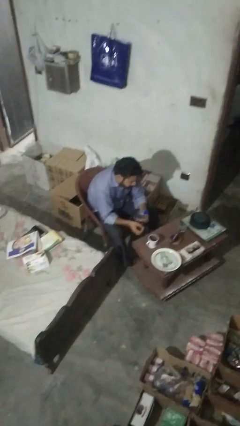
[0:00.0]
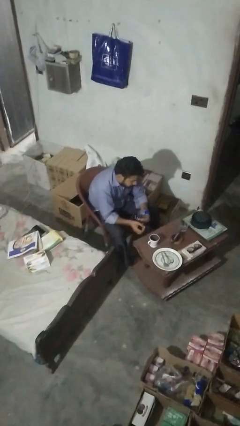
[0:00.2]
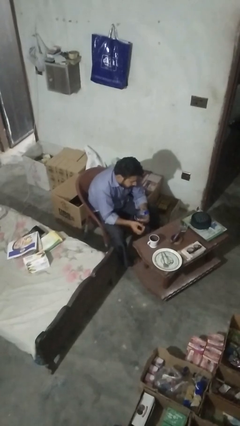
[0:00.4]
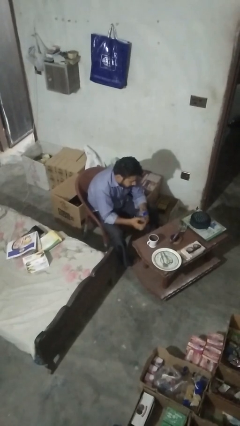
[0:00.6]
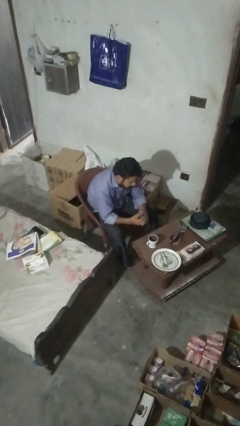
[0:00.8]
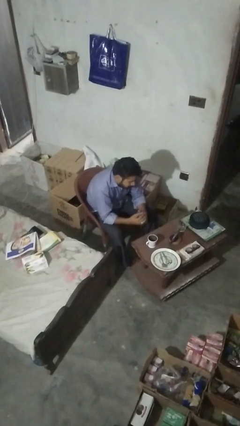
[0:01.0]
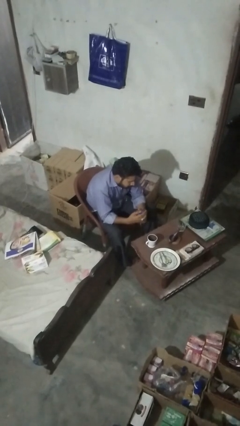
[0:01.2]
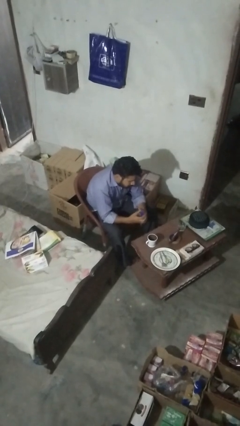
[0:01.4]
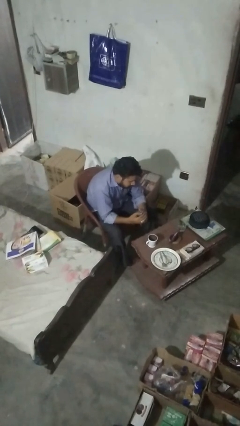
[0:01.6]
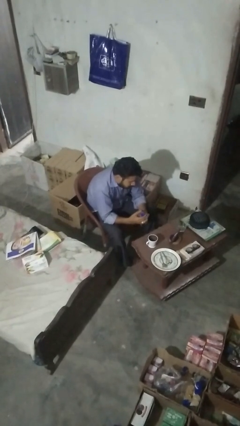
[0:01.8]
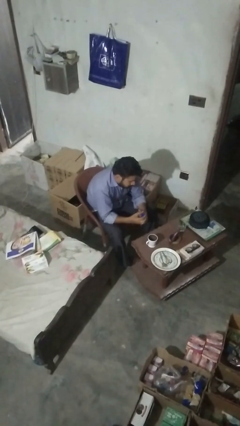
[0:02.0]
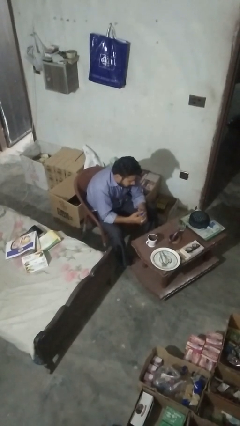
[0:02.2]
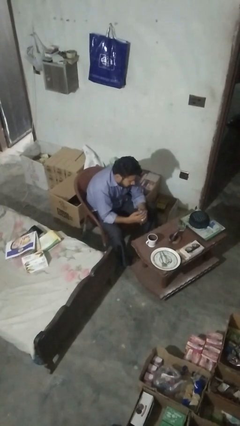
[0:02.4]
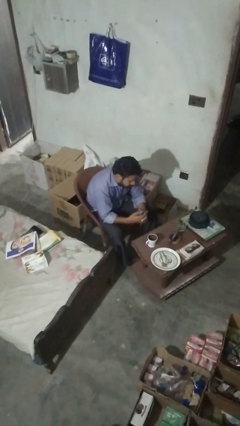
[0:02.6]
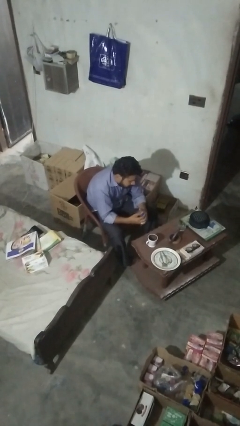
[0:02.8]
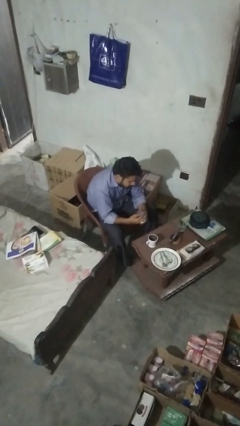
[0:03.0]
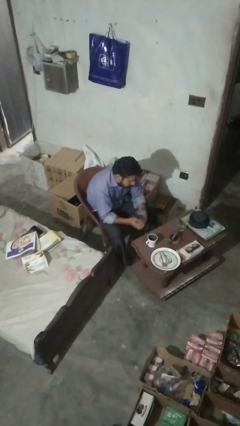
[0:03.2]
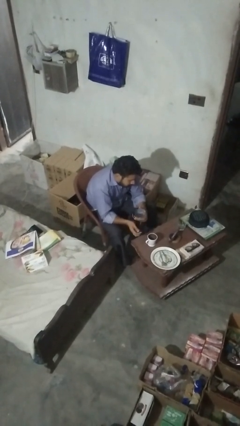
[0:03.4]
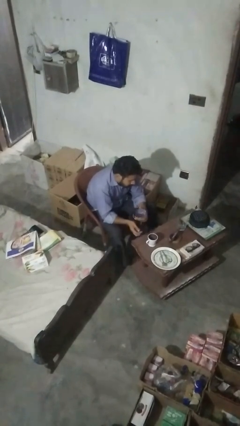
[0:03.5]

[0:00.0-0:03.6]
person unscrews lid from bottle

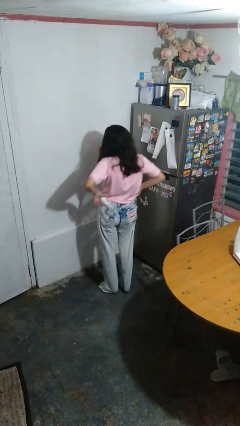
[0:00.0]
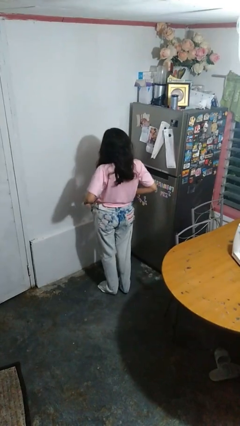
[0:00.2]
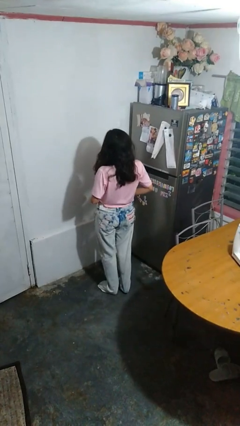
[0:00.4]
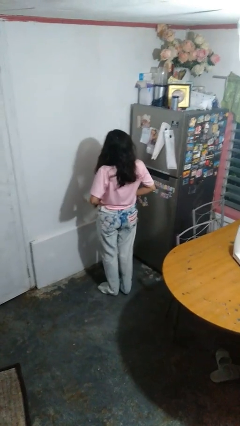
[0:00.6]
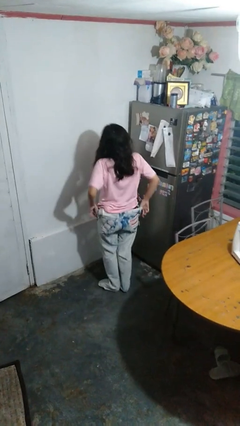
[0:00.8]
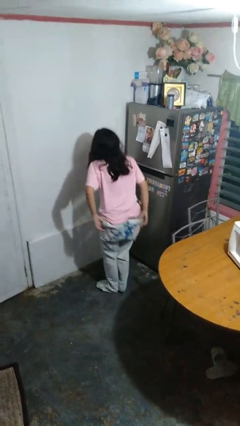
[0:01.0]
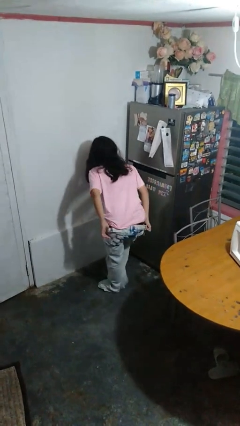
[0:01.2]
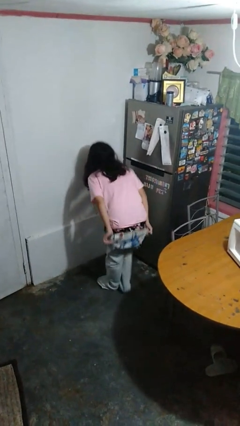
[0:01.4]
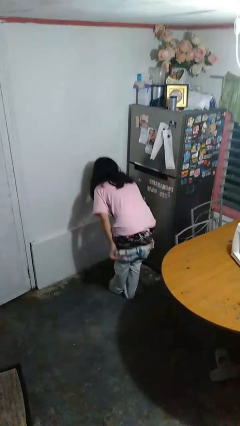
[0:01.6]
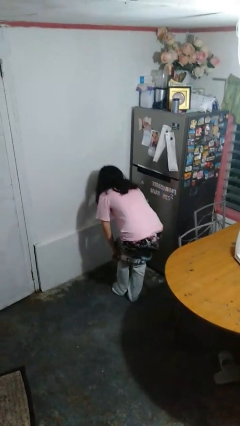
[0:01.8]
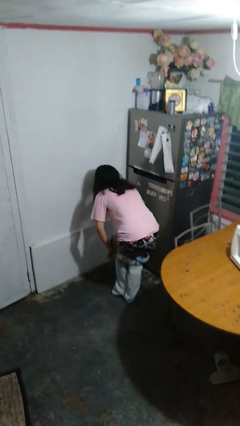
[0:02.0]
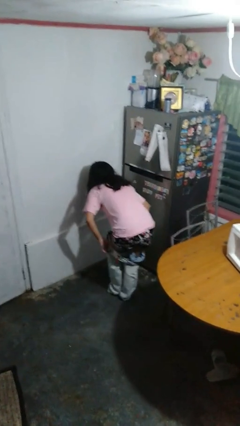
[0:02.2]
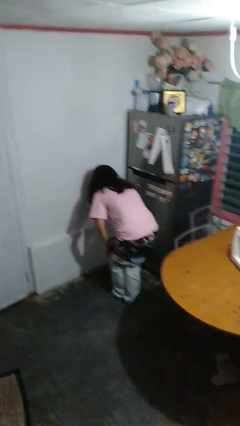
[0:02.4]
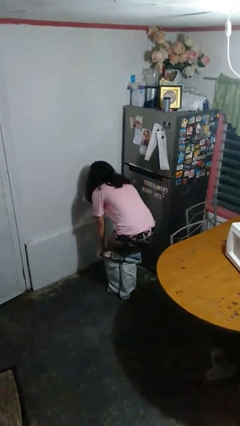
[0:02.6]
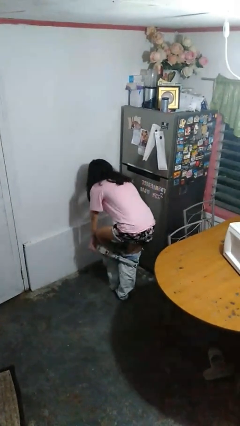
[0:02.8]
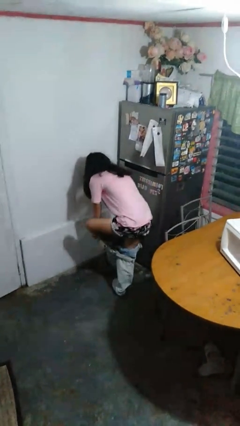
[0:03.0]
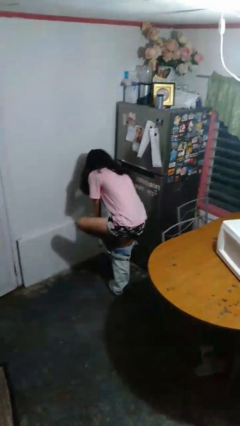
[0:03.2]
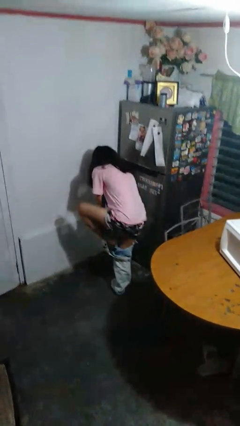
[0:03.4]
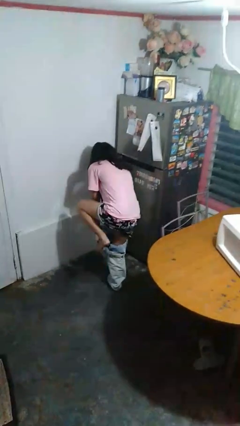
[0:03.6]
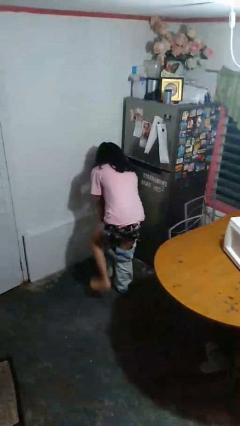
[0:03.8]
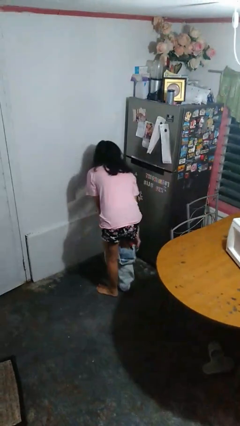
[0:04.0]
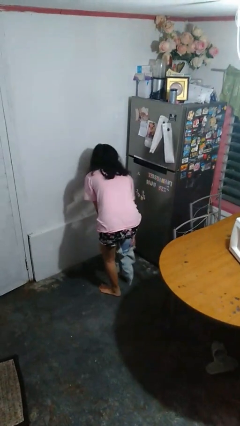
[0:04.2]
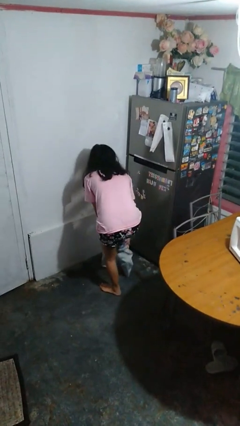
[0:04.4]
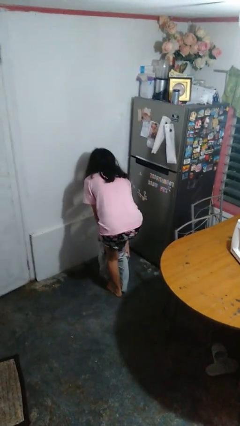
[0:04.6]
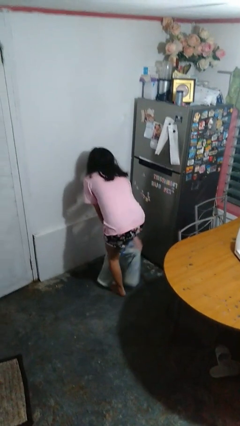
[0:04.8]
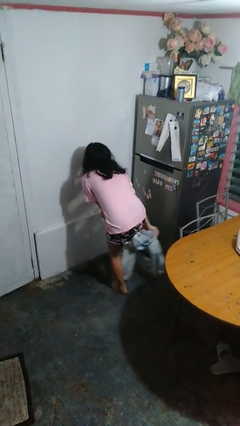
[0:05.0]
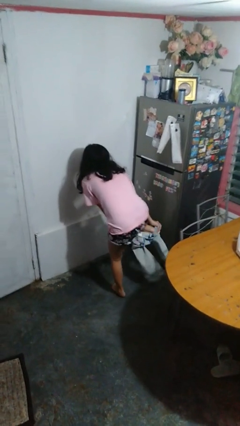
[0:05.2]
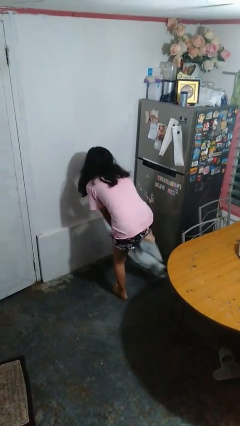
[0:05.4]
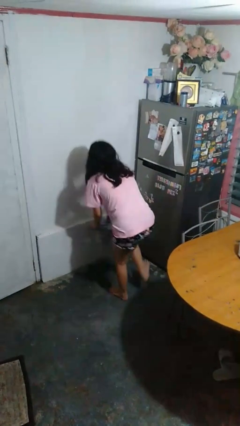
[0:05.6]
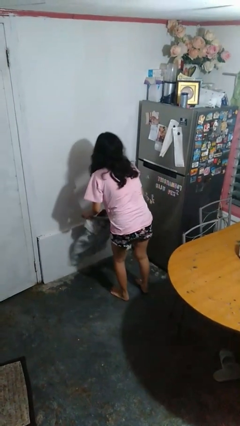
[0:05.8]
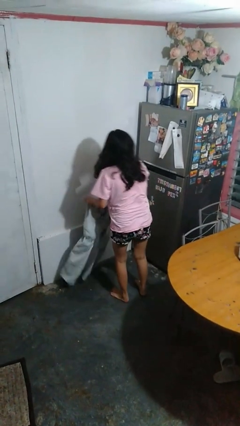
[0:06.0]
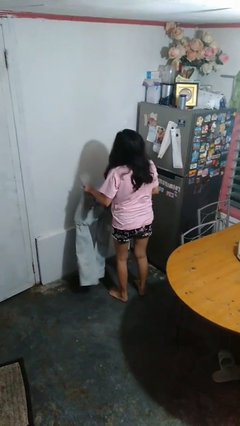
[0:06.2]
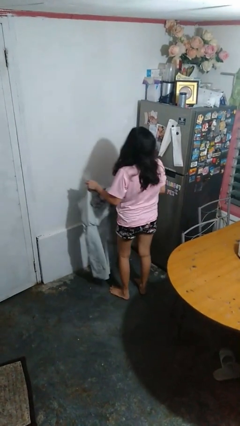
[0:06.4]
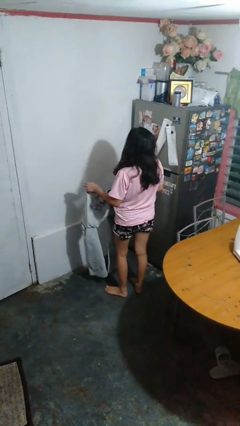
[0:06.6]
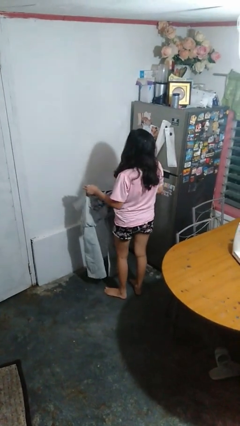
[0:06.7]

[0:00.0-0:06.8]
person takes off pants

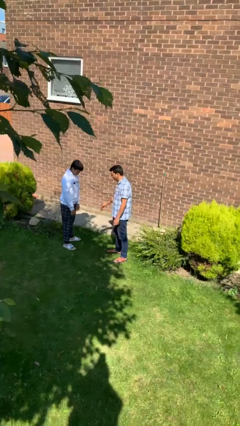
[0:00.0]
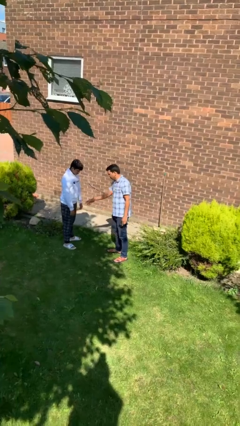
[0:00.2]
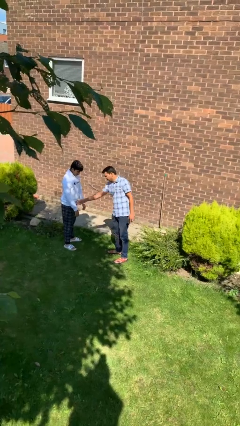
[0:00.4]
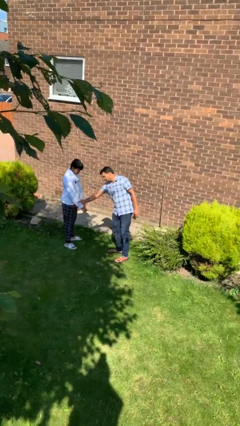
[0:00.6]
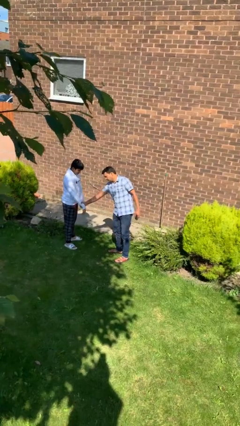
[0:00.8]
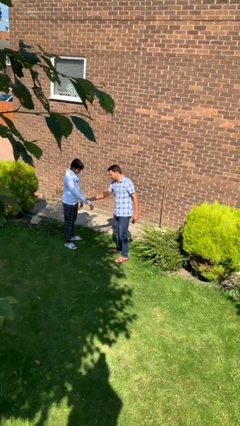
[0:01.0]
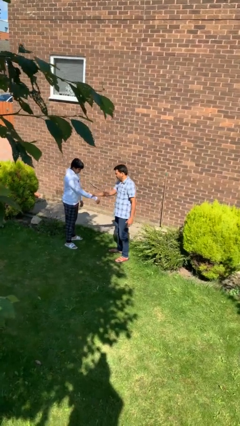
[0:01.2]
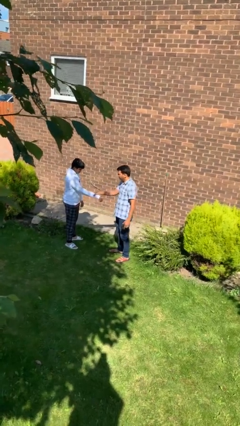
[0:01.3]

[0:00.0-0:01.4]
person grabs person by forearm

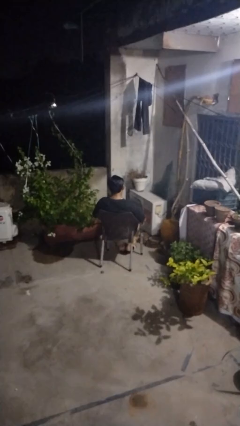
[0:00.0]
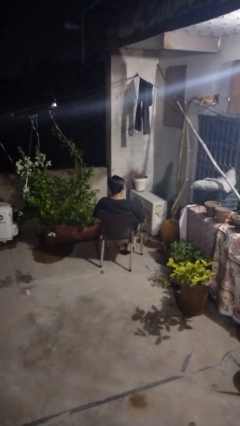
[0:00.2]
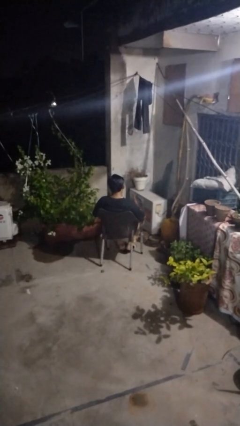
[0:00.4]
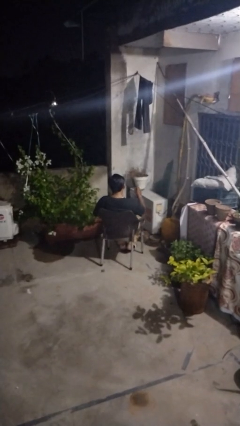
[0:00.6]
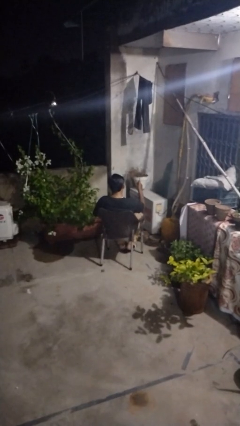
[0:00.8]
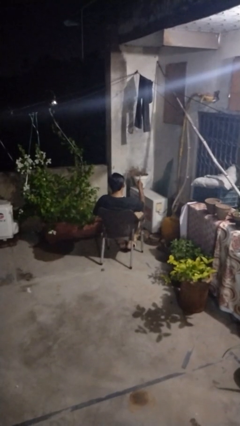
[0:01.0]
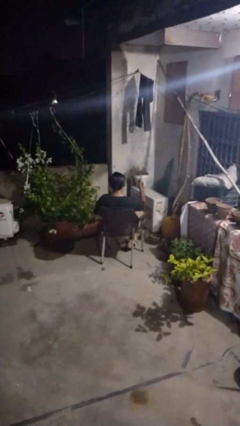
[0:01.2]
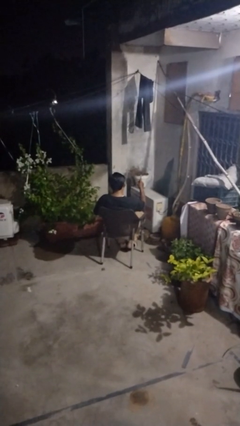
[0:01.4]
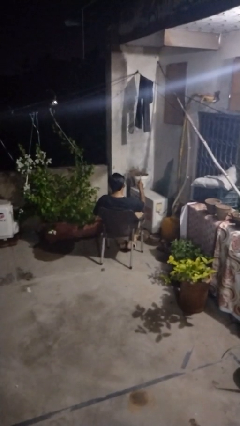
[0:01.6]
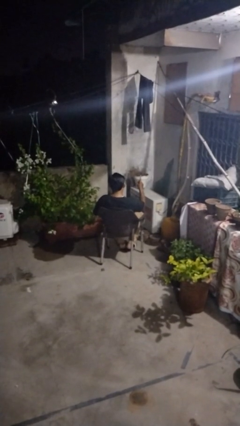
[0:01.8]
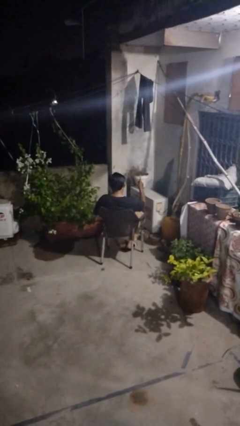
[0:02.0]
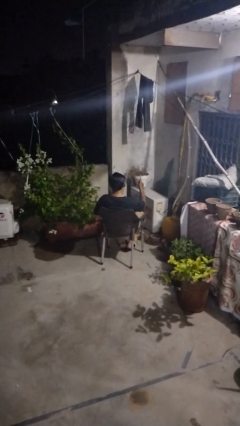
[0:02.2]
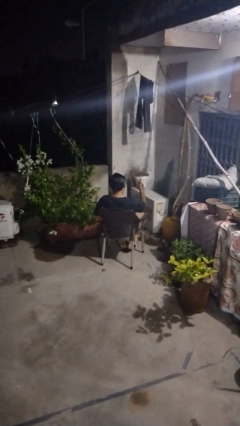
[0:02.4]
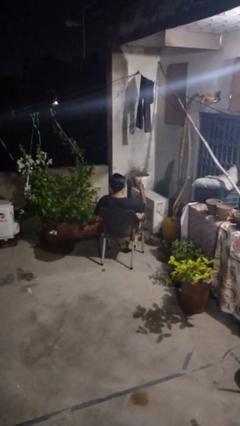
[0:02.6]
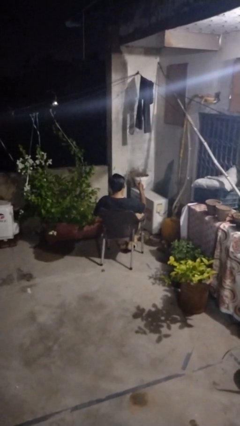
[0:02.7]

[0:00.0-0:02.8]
person gestures number one

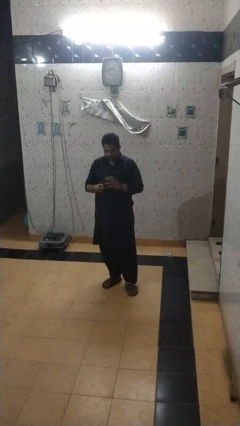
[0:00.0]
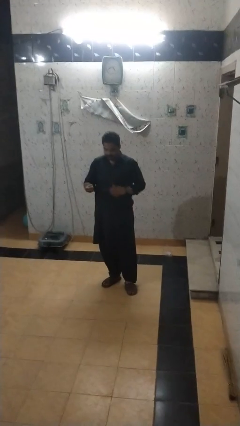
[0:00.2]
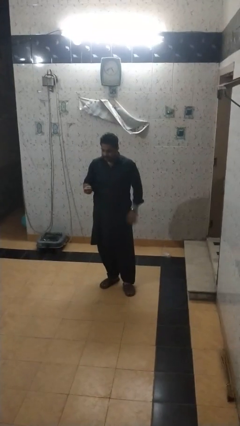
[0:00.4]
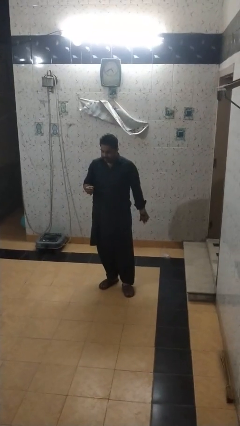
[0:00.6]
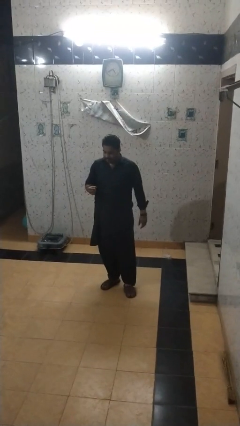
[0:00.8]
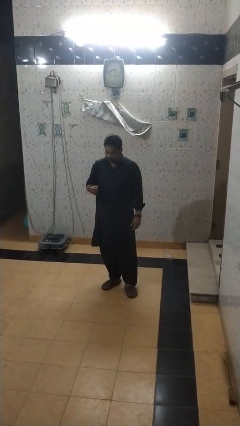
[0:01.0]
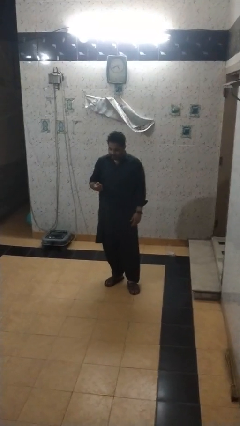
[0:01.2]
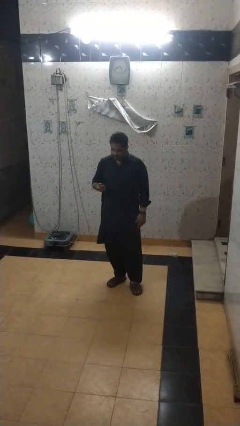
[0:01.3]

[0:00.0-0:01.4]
person takes off ring

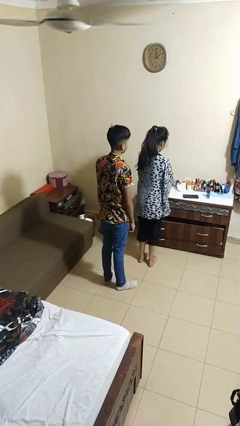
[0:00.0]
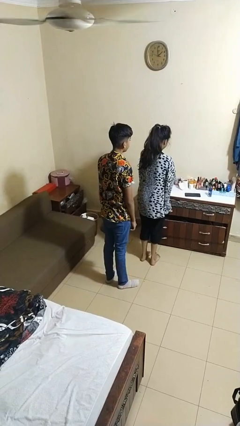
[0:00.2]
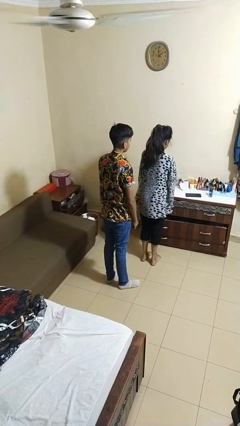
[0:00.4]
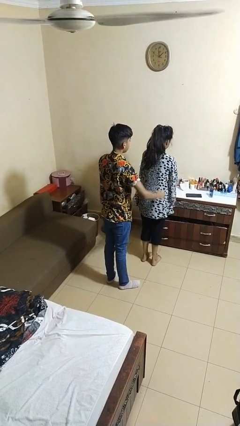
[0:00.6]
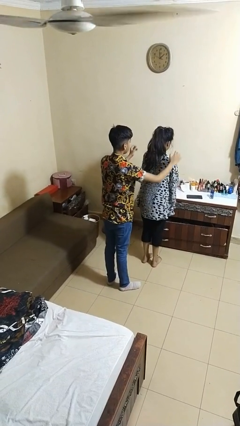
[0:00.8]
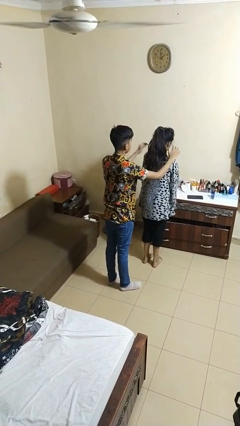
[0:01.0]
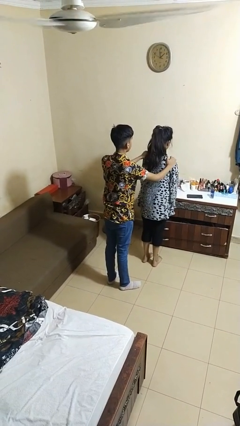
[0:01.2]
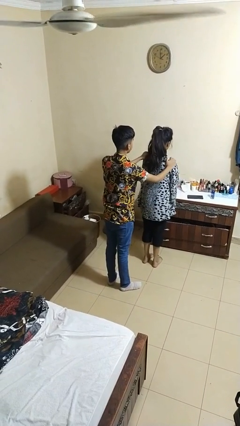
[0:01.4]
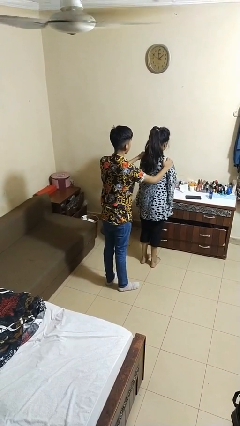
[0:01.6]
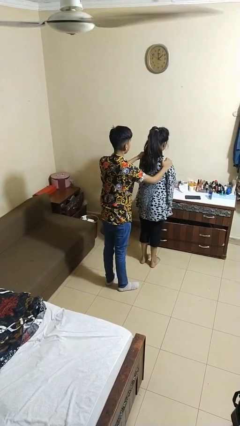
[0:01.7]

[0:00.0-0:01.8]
person grabs person by shoulder
